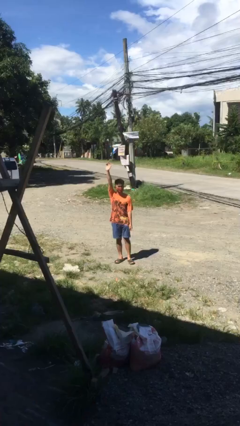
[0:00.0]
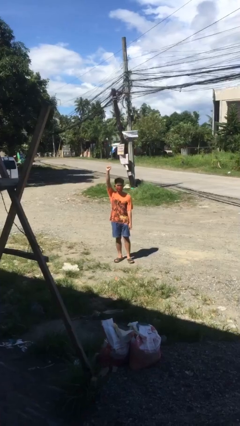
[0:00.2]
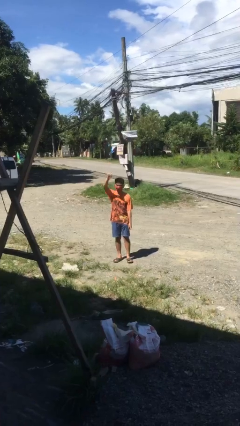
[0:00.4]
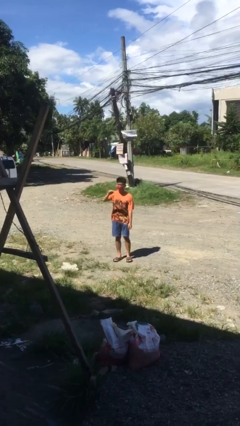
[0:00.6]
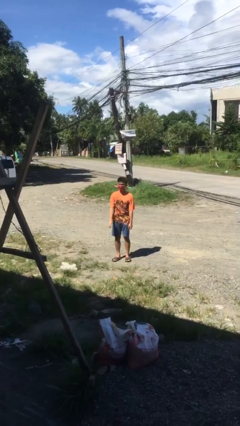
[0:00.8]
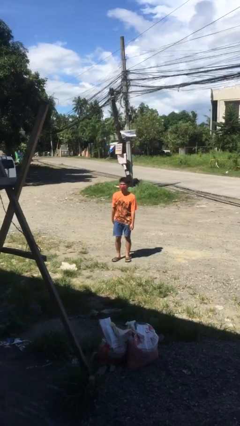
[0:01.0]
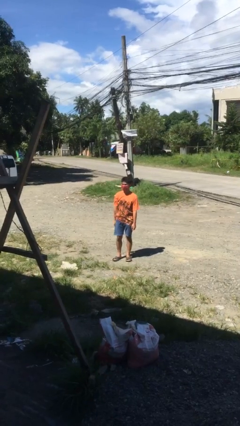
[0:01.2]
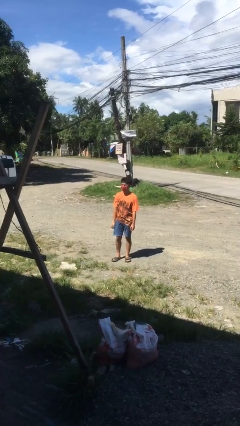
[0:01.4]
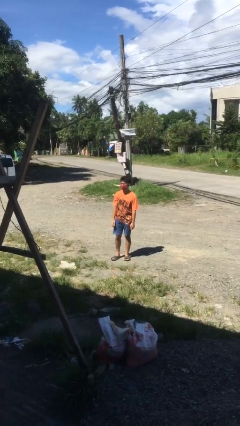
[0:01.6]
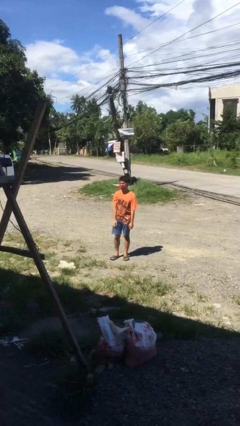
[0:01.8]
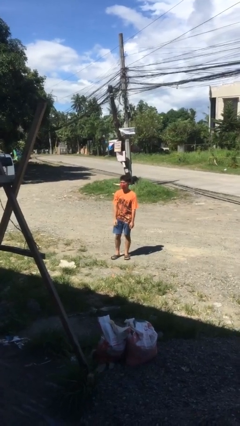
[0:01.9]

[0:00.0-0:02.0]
person gestures lower hand

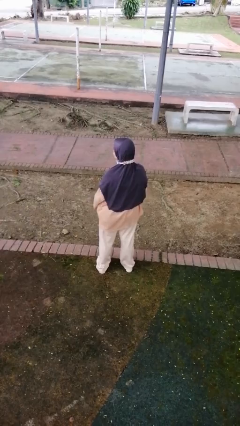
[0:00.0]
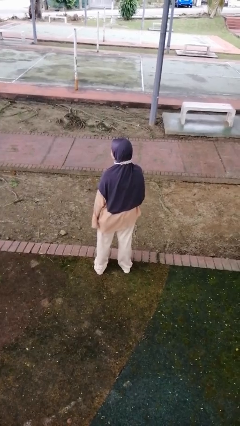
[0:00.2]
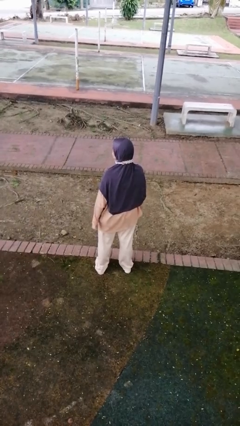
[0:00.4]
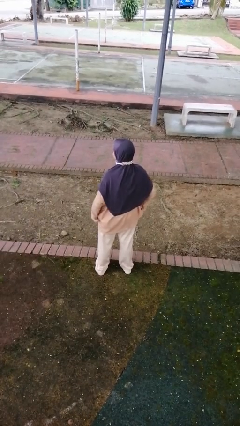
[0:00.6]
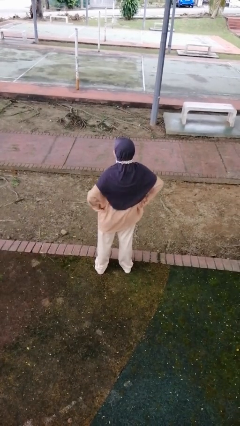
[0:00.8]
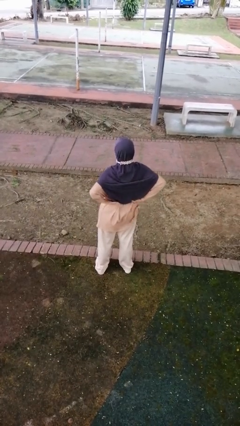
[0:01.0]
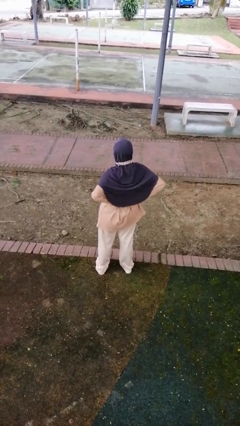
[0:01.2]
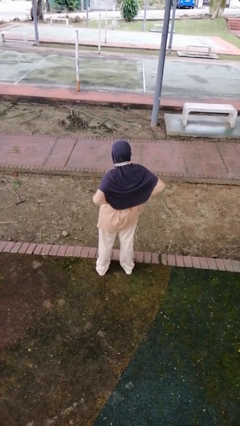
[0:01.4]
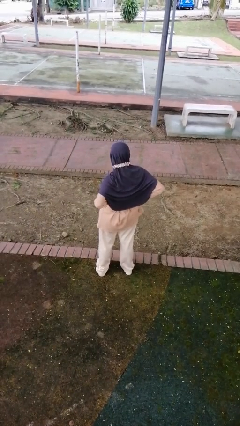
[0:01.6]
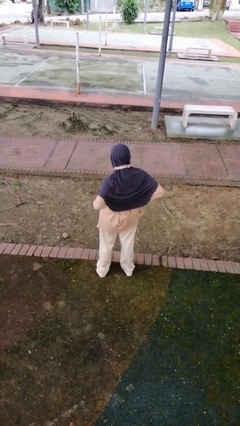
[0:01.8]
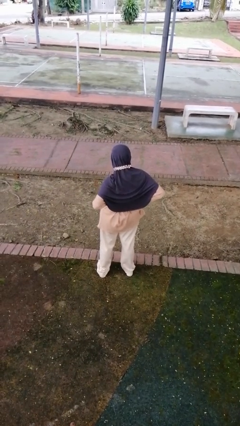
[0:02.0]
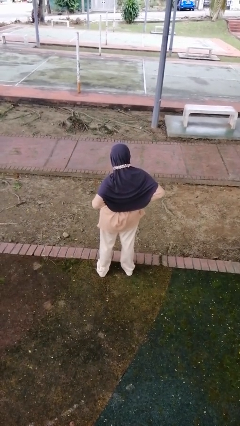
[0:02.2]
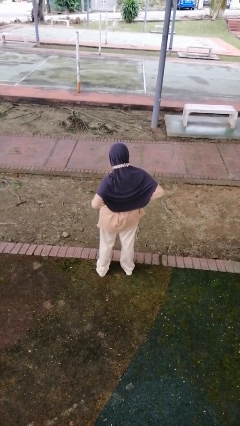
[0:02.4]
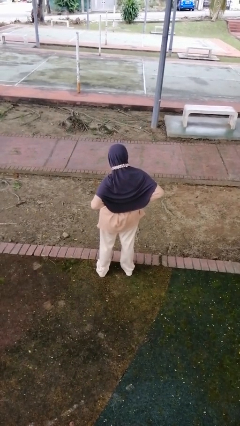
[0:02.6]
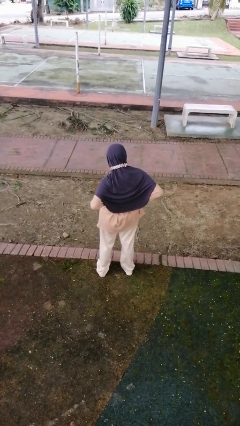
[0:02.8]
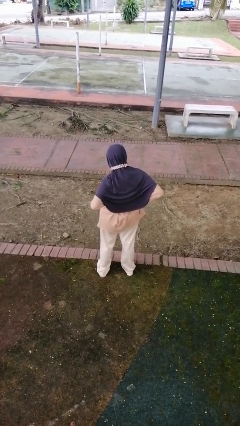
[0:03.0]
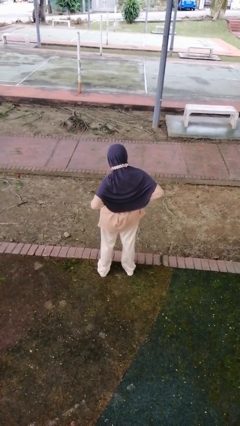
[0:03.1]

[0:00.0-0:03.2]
person stretches back

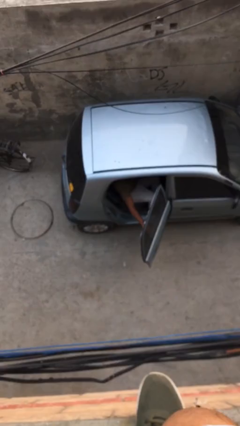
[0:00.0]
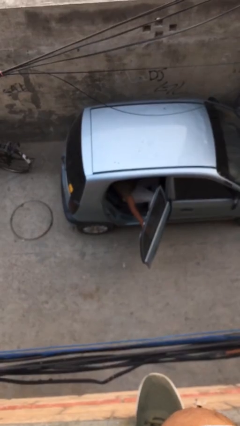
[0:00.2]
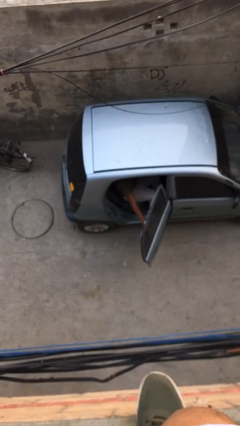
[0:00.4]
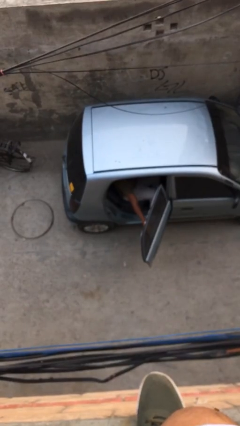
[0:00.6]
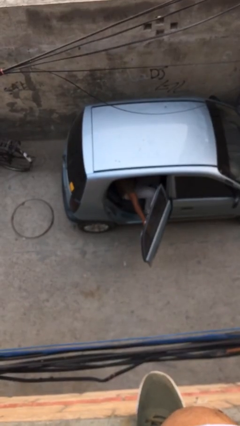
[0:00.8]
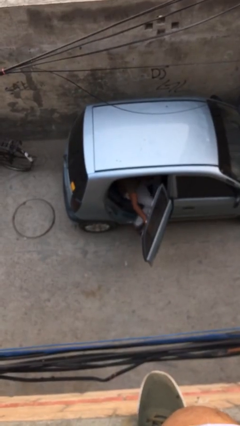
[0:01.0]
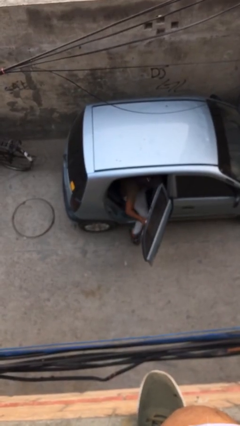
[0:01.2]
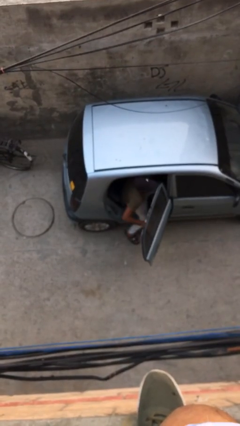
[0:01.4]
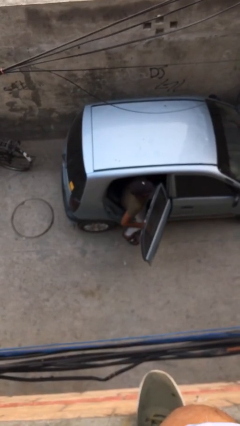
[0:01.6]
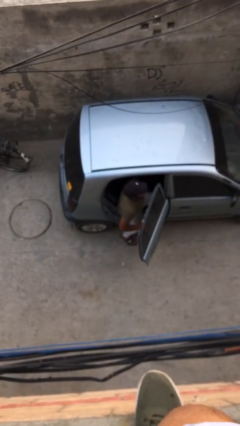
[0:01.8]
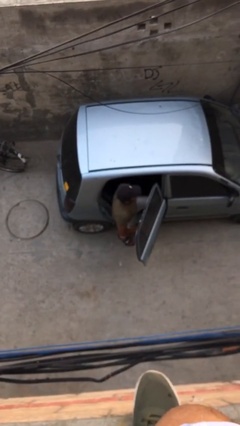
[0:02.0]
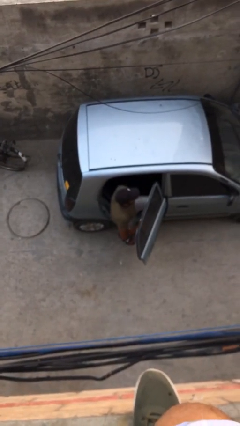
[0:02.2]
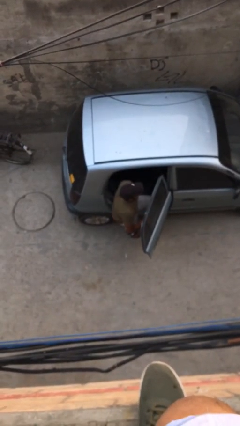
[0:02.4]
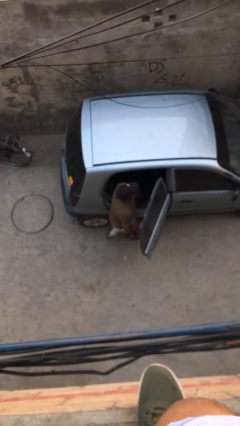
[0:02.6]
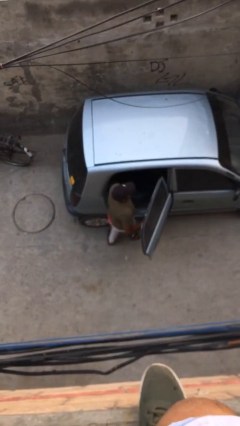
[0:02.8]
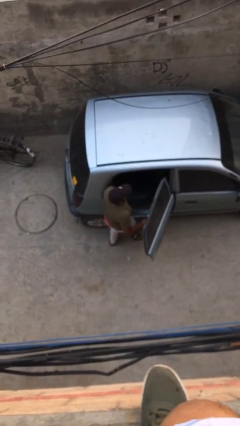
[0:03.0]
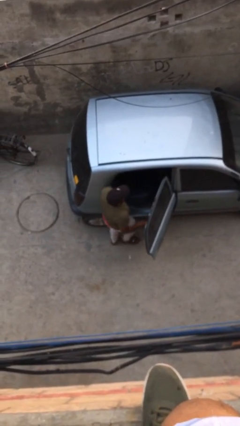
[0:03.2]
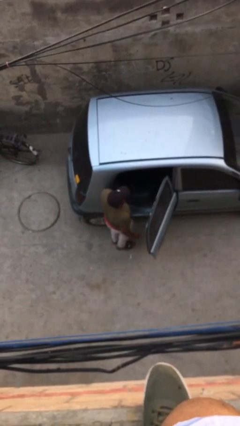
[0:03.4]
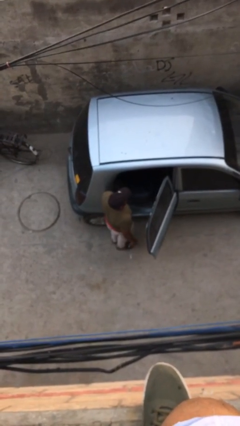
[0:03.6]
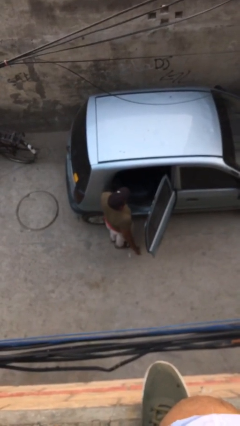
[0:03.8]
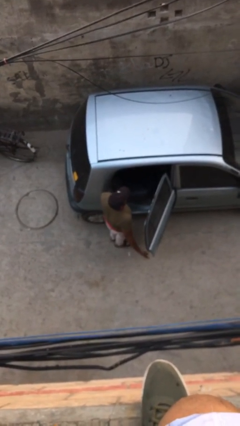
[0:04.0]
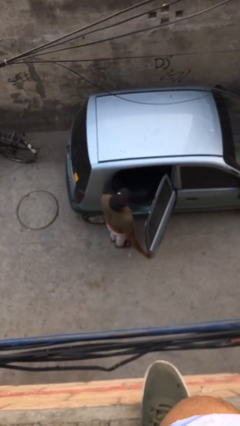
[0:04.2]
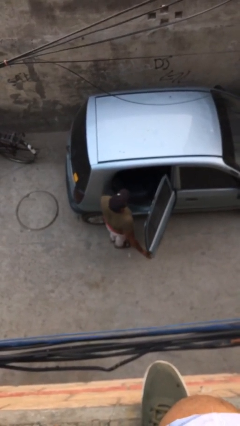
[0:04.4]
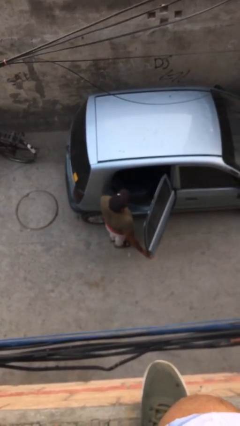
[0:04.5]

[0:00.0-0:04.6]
person exits car

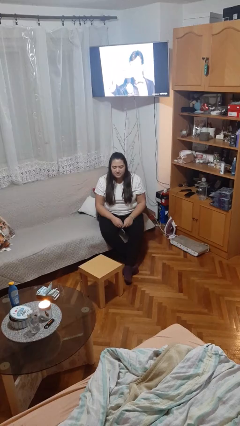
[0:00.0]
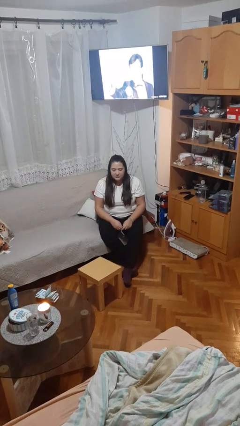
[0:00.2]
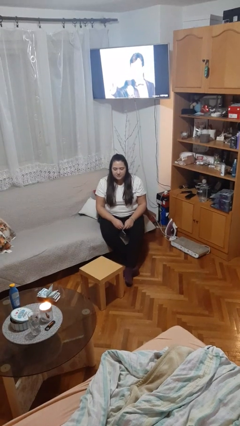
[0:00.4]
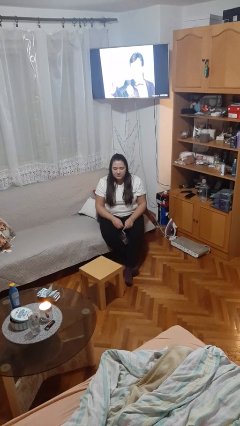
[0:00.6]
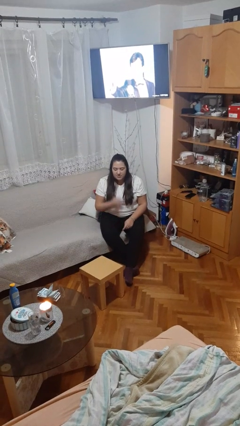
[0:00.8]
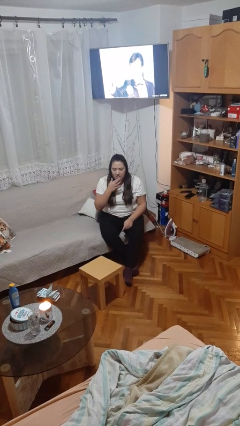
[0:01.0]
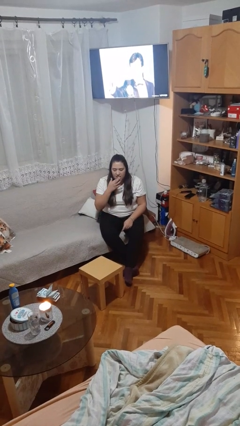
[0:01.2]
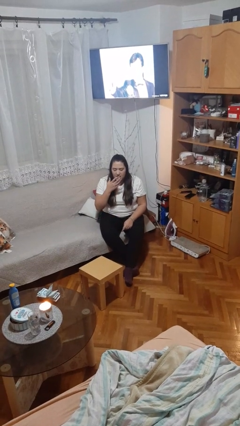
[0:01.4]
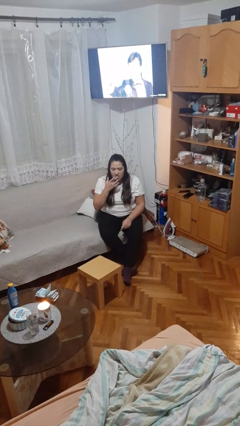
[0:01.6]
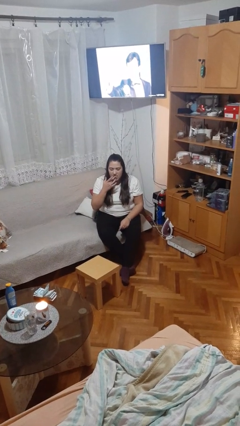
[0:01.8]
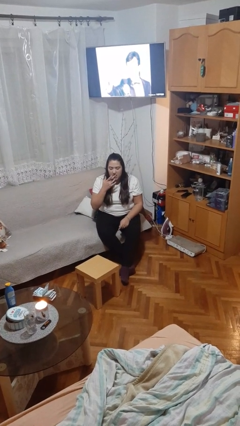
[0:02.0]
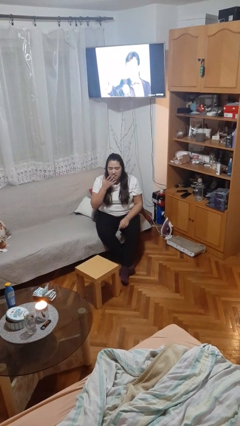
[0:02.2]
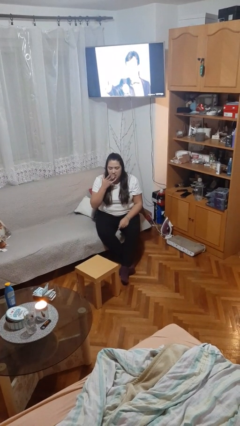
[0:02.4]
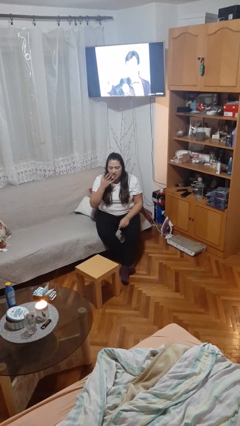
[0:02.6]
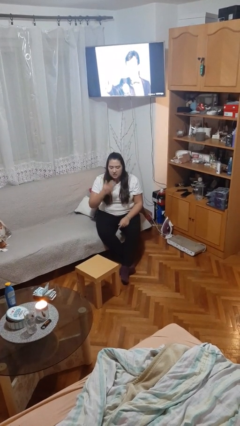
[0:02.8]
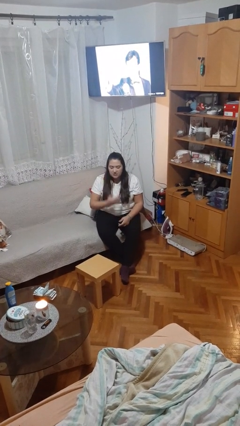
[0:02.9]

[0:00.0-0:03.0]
person licks fingers

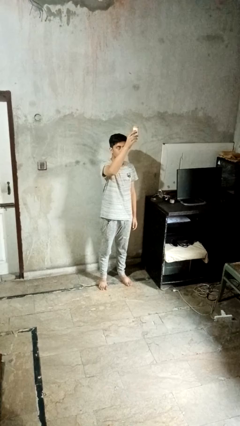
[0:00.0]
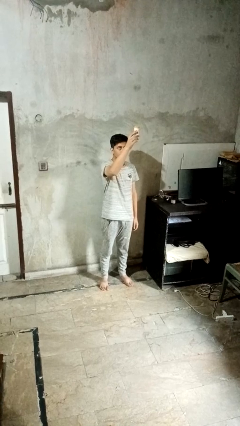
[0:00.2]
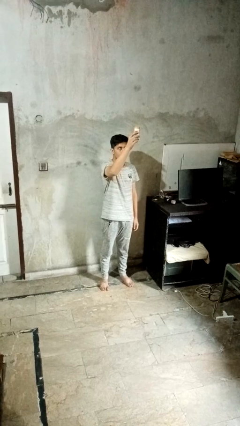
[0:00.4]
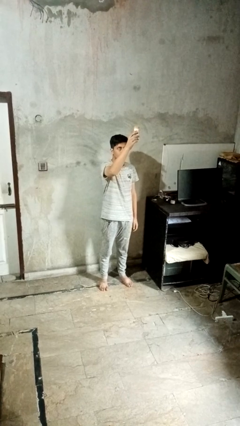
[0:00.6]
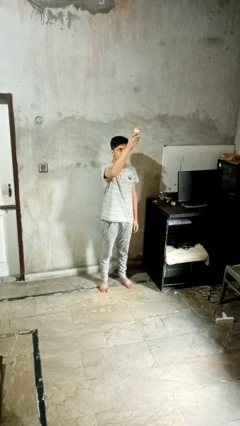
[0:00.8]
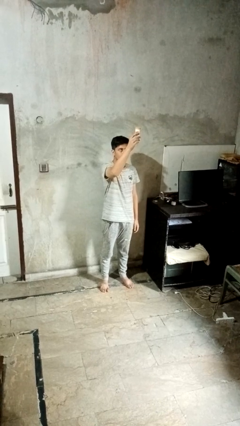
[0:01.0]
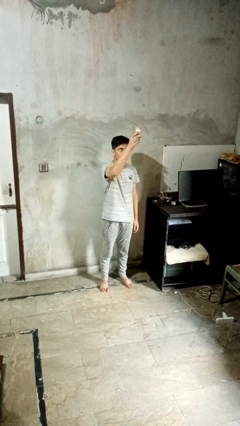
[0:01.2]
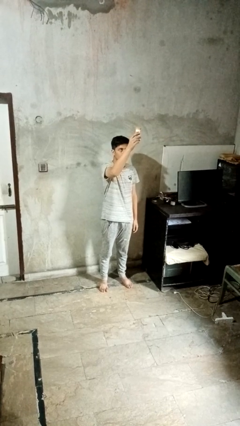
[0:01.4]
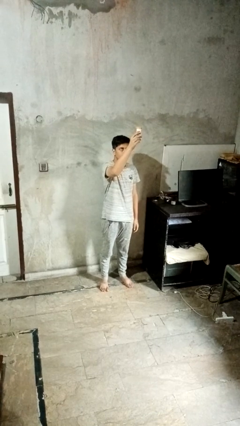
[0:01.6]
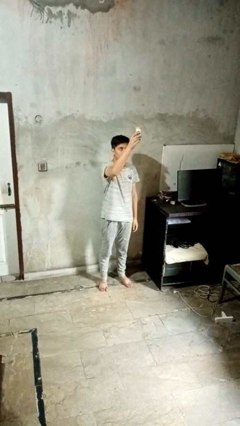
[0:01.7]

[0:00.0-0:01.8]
person drops object

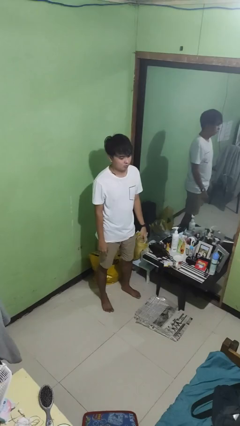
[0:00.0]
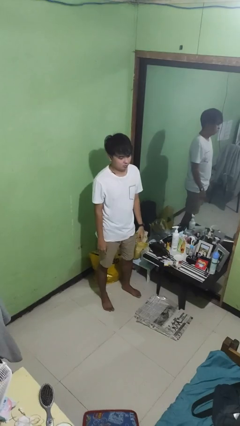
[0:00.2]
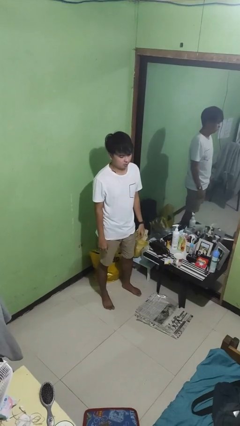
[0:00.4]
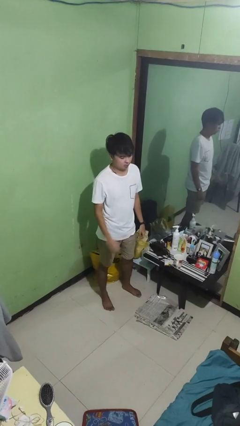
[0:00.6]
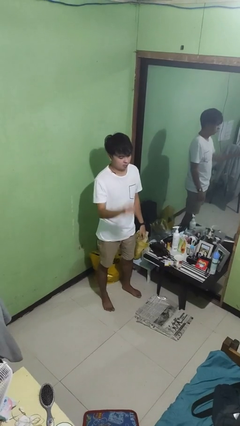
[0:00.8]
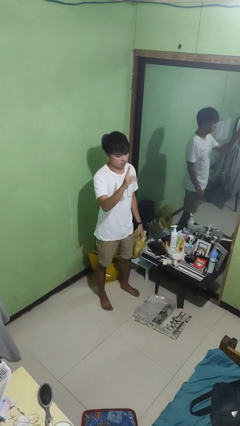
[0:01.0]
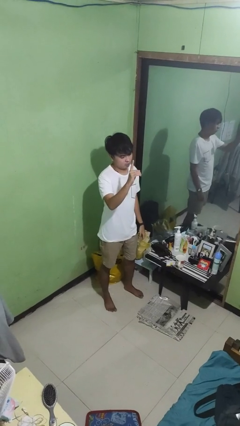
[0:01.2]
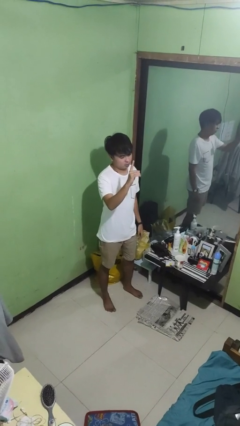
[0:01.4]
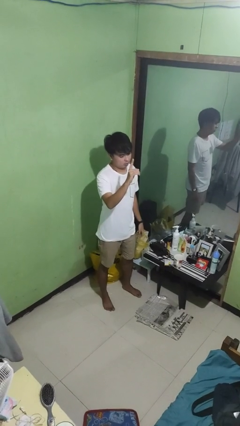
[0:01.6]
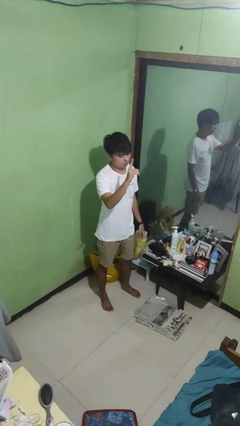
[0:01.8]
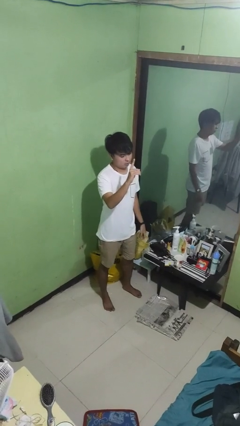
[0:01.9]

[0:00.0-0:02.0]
person gestures number one

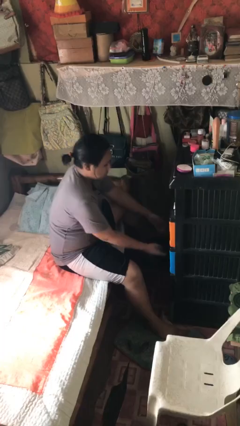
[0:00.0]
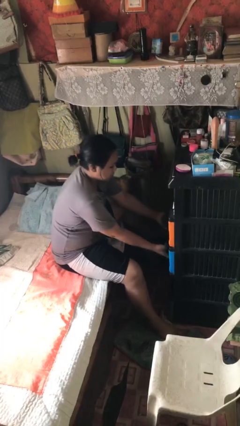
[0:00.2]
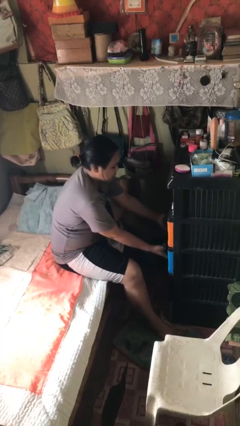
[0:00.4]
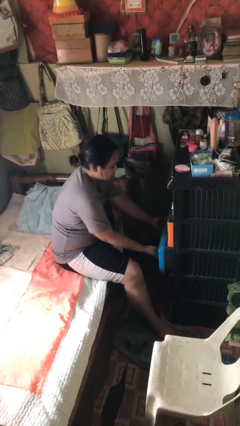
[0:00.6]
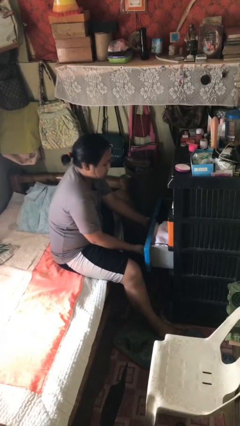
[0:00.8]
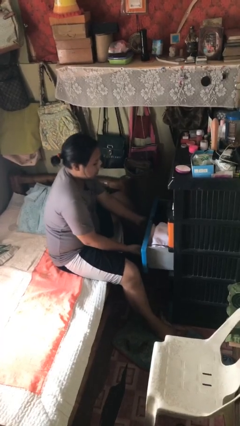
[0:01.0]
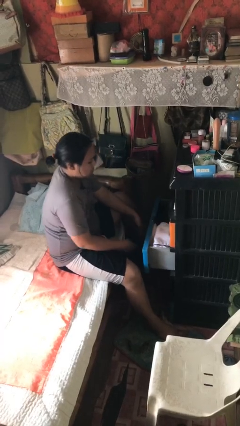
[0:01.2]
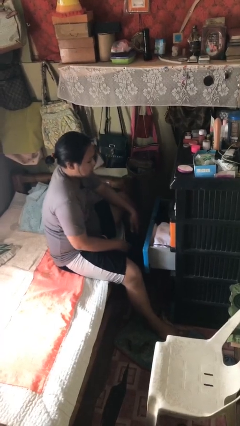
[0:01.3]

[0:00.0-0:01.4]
person opens dresser drawer
